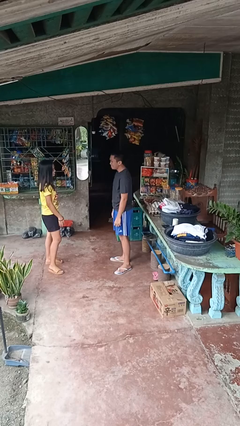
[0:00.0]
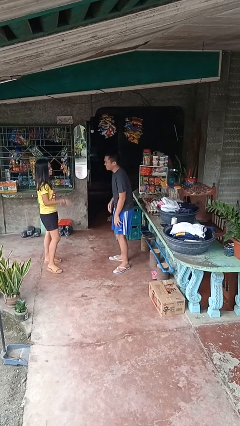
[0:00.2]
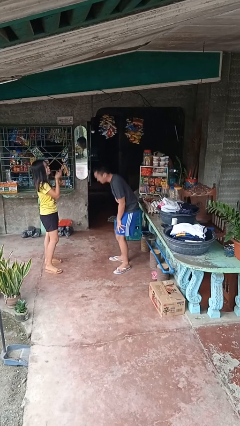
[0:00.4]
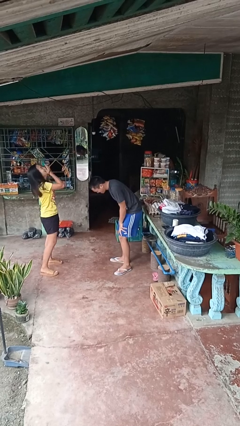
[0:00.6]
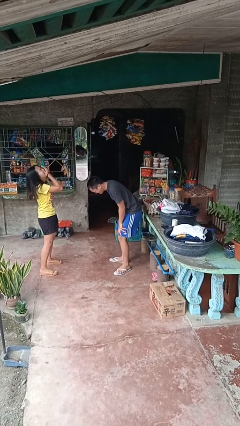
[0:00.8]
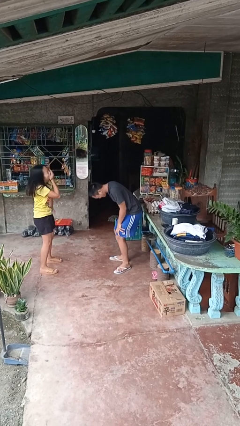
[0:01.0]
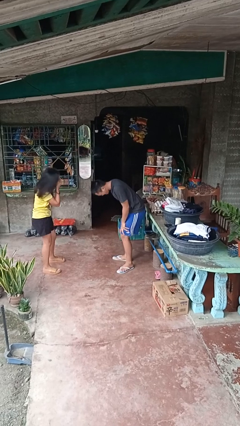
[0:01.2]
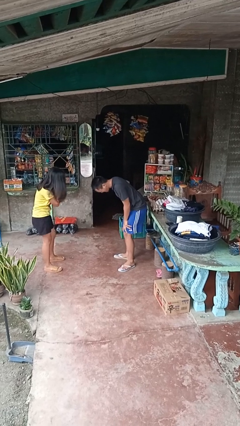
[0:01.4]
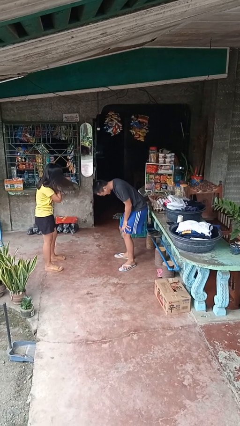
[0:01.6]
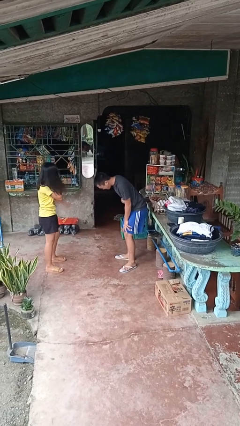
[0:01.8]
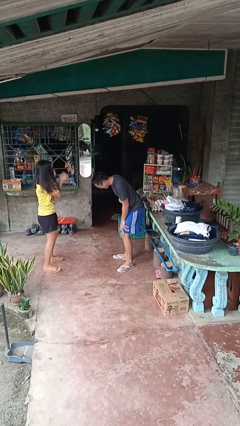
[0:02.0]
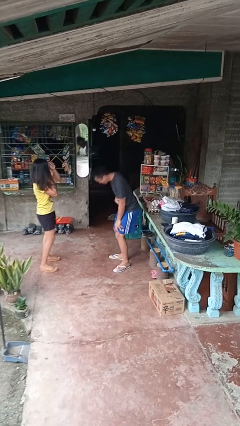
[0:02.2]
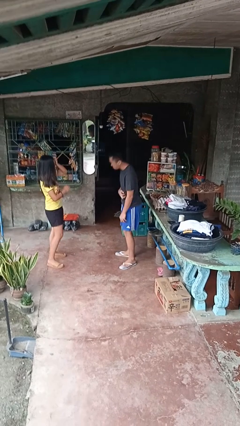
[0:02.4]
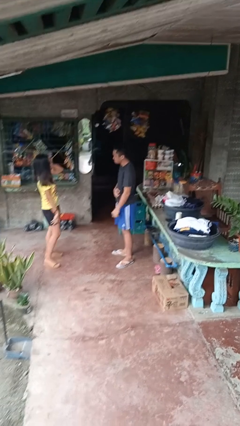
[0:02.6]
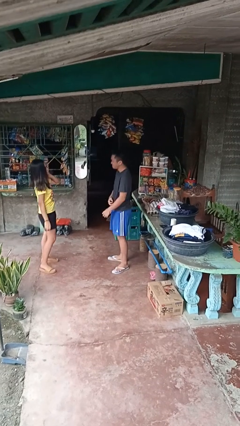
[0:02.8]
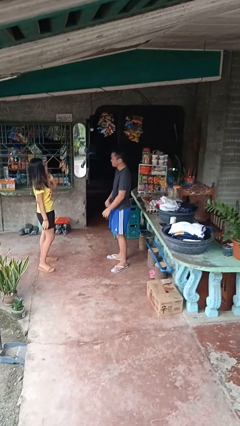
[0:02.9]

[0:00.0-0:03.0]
person laughs with person

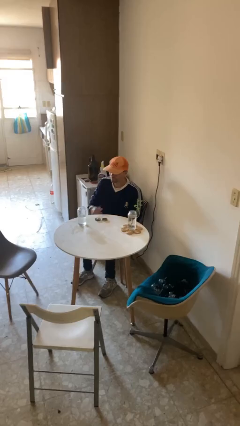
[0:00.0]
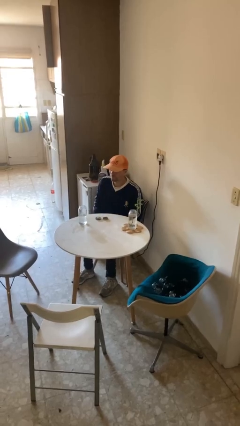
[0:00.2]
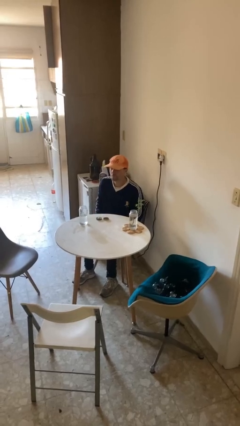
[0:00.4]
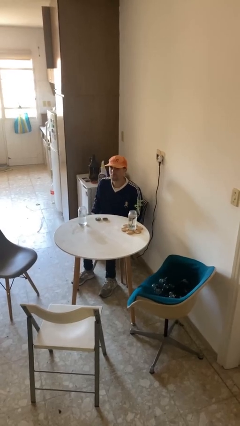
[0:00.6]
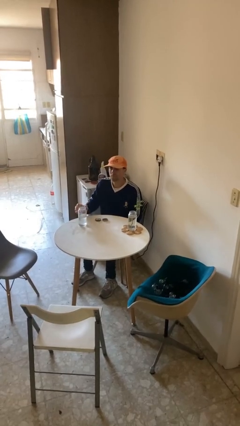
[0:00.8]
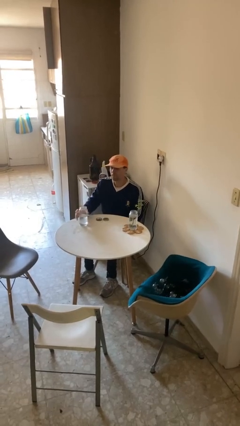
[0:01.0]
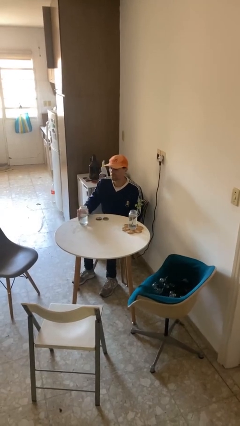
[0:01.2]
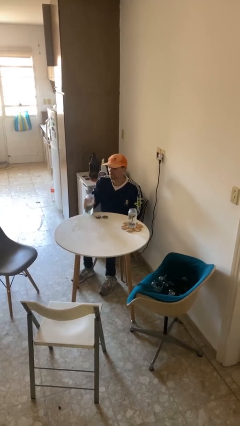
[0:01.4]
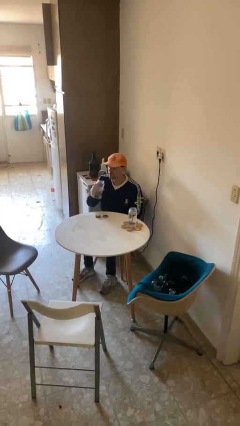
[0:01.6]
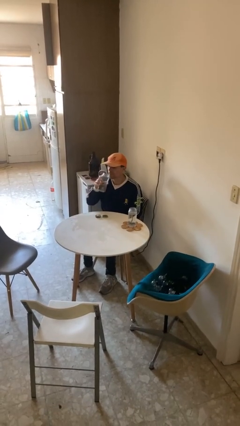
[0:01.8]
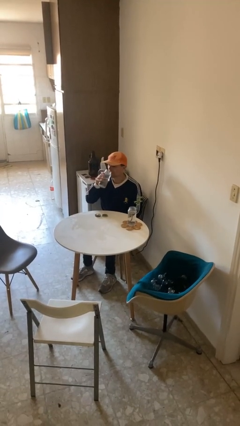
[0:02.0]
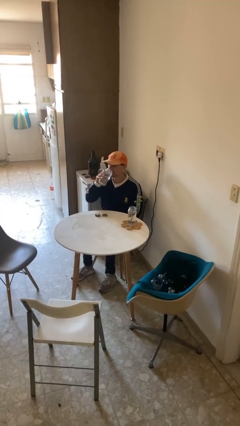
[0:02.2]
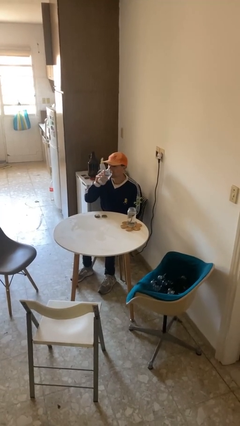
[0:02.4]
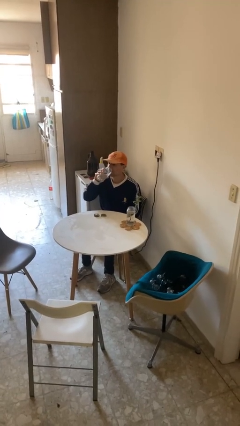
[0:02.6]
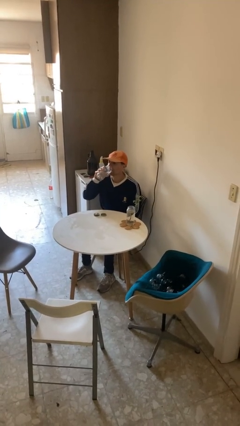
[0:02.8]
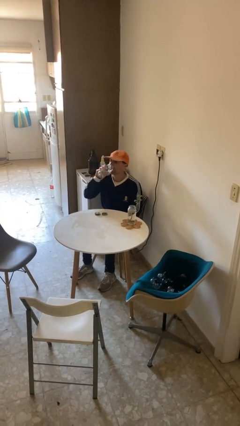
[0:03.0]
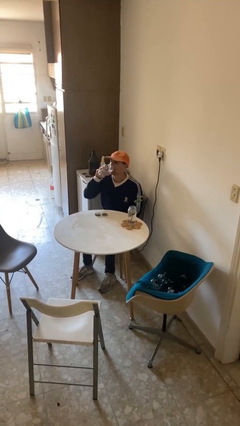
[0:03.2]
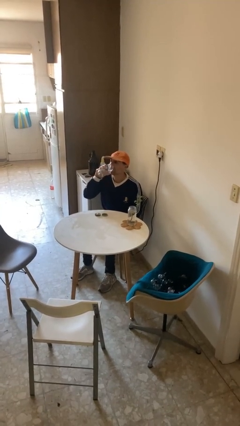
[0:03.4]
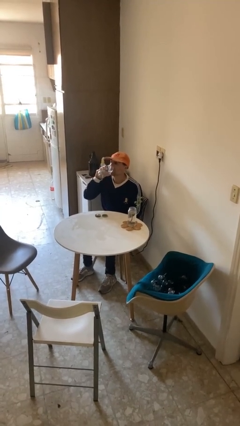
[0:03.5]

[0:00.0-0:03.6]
person drinks from cup

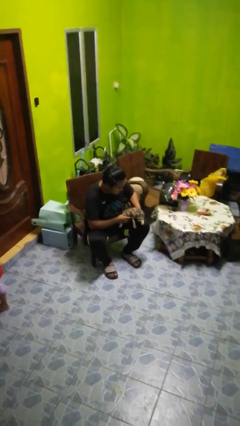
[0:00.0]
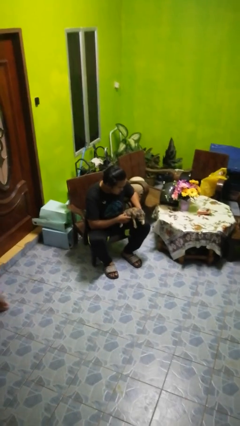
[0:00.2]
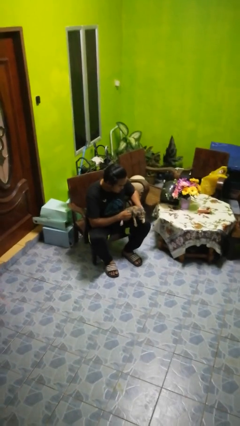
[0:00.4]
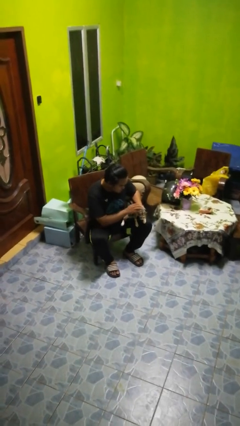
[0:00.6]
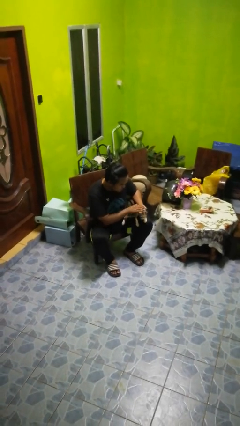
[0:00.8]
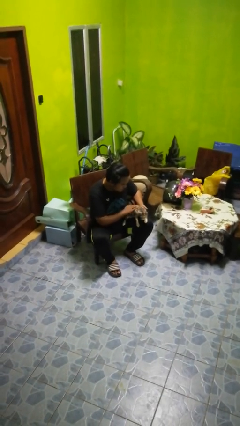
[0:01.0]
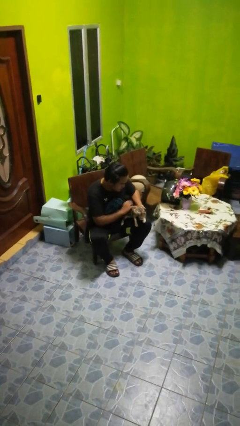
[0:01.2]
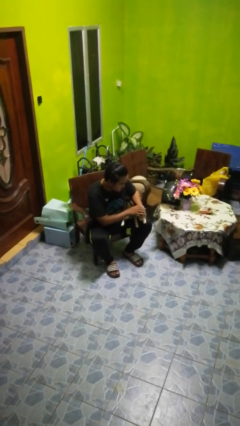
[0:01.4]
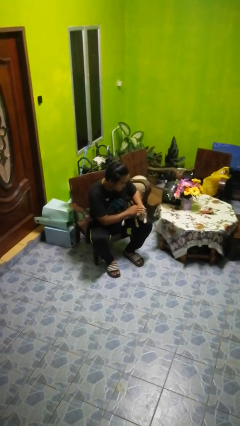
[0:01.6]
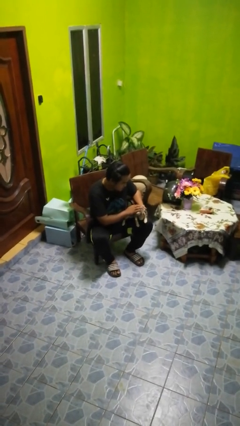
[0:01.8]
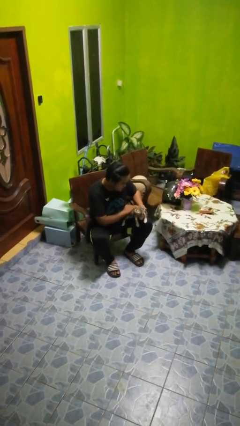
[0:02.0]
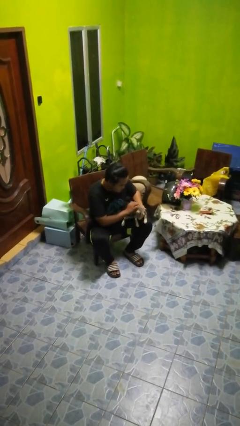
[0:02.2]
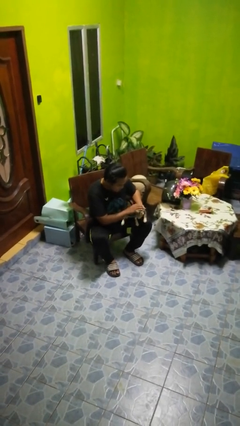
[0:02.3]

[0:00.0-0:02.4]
person pets cat

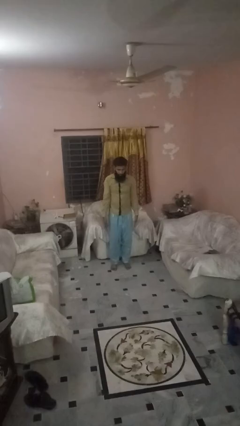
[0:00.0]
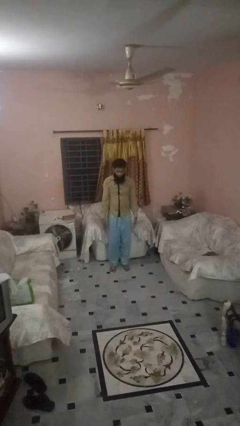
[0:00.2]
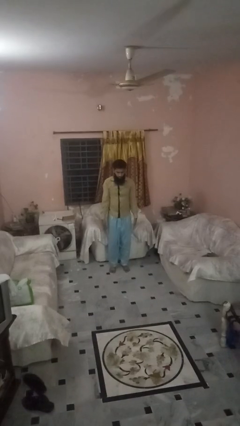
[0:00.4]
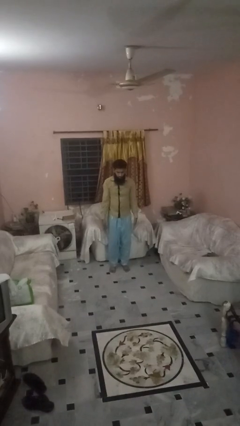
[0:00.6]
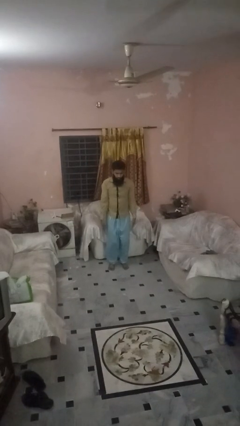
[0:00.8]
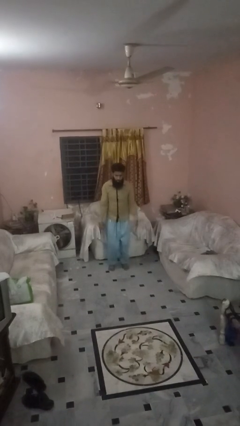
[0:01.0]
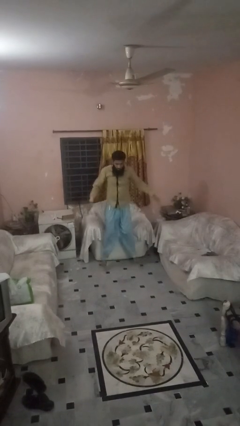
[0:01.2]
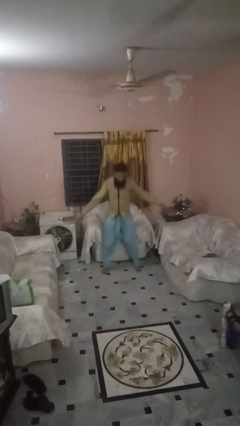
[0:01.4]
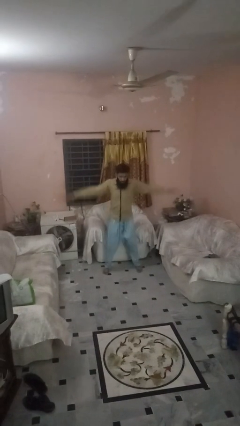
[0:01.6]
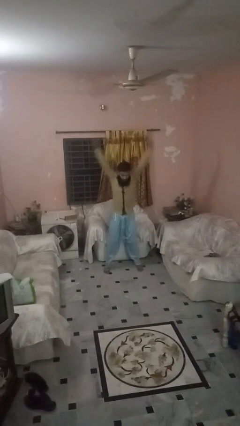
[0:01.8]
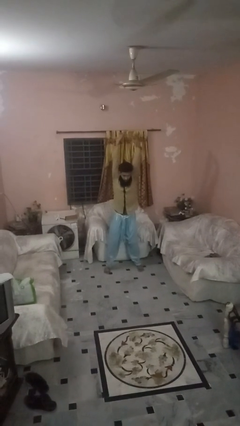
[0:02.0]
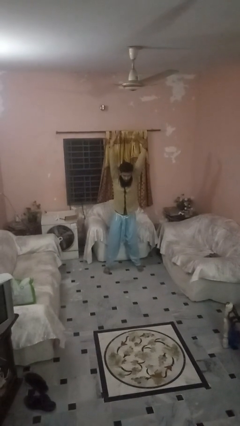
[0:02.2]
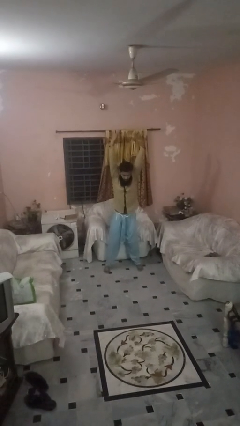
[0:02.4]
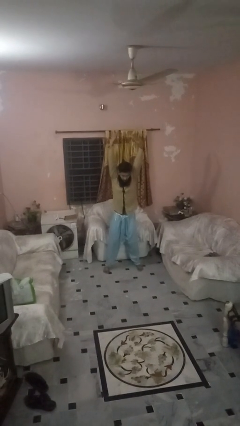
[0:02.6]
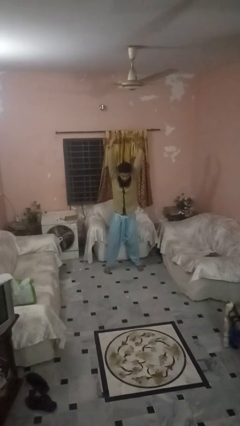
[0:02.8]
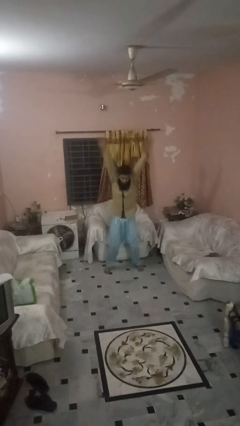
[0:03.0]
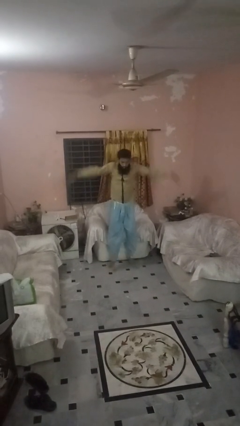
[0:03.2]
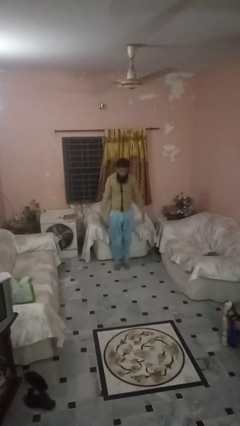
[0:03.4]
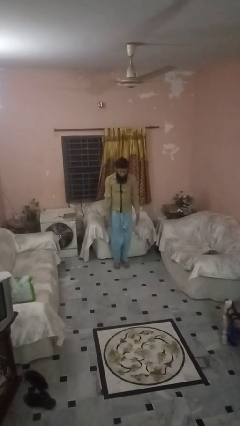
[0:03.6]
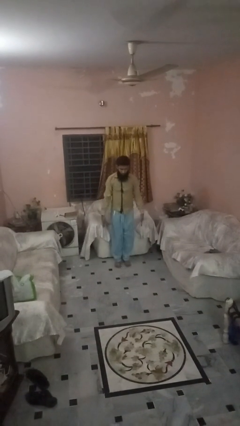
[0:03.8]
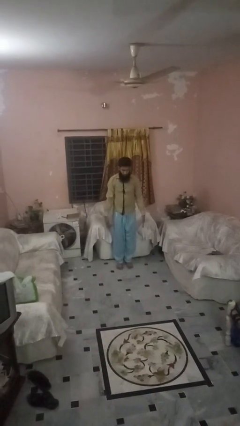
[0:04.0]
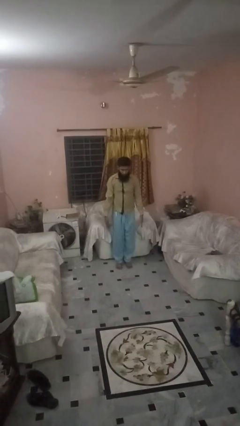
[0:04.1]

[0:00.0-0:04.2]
person exercises with jumping jacks

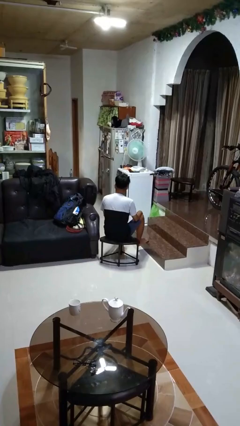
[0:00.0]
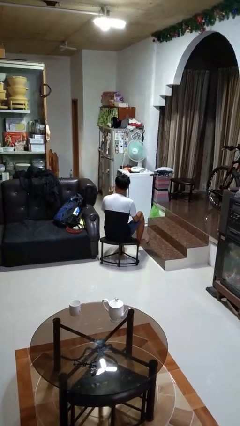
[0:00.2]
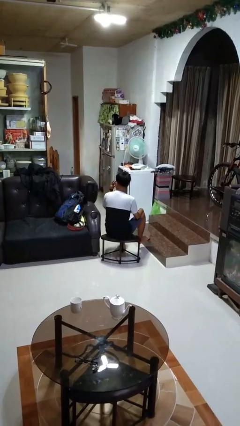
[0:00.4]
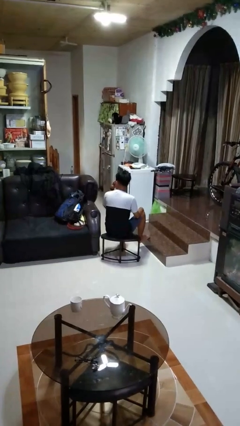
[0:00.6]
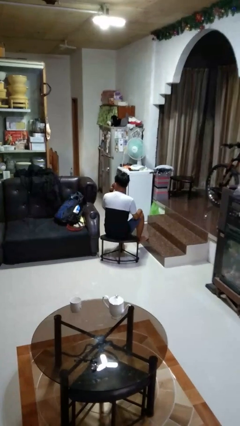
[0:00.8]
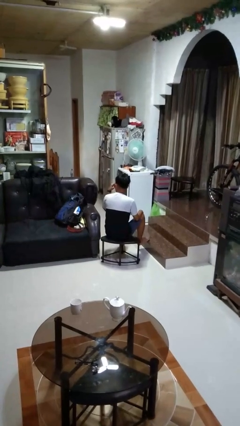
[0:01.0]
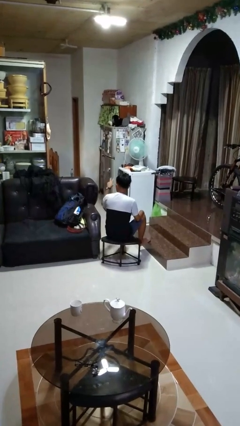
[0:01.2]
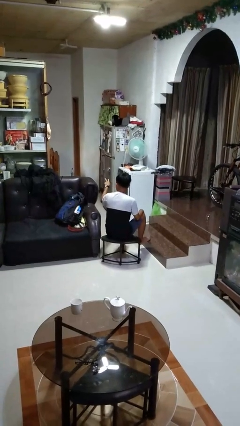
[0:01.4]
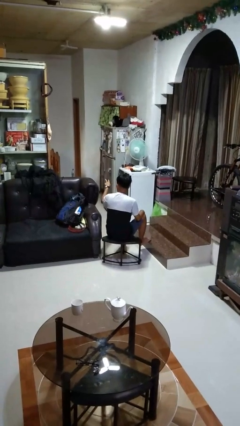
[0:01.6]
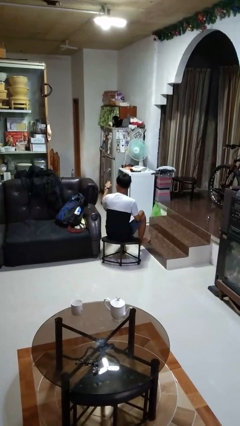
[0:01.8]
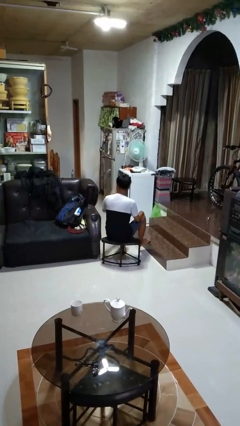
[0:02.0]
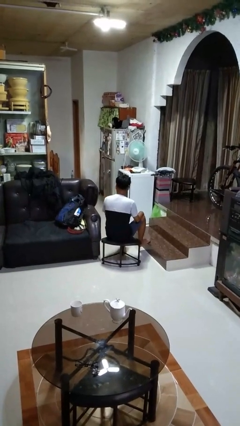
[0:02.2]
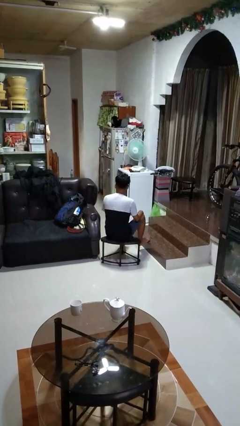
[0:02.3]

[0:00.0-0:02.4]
person gestures watch closely

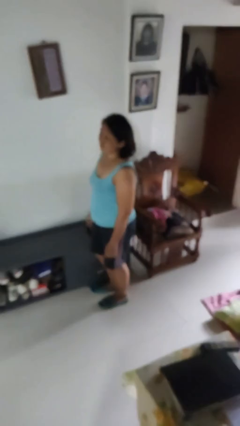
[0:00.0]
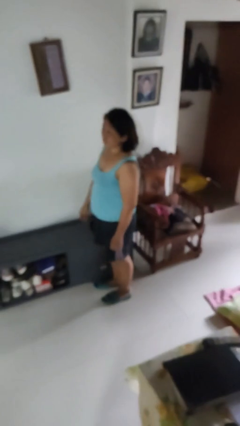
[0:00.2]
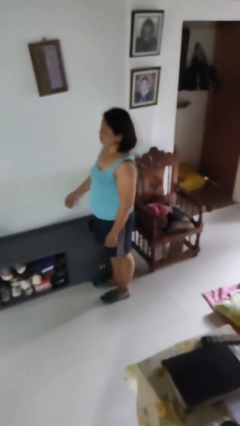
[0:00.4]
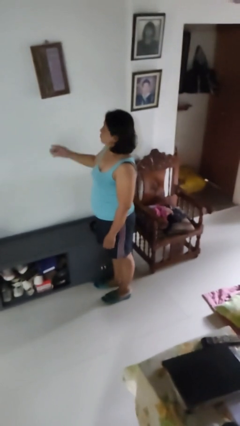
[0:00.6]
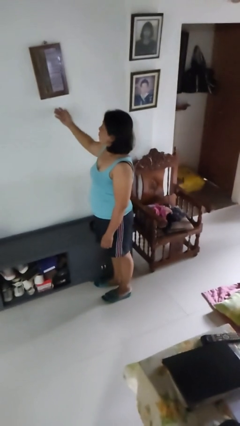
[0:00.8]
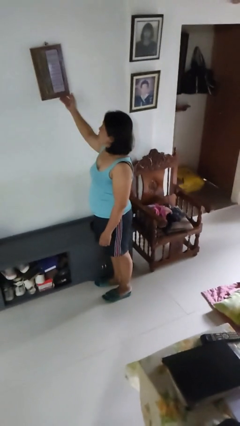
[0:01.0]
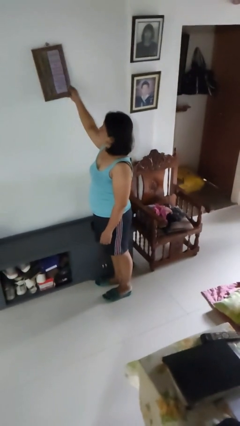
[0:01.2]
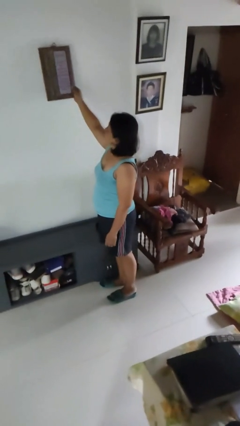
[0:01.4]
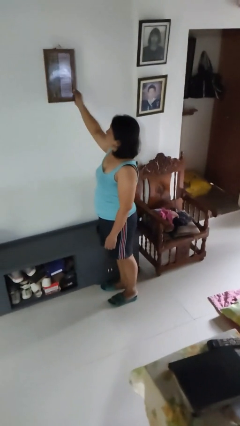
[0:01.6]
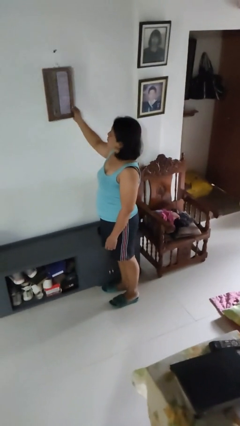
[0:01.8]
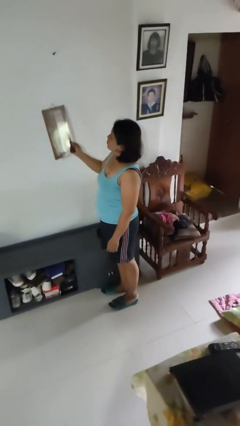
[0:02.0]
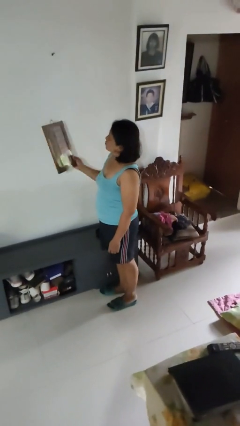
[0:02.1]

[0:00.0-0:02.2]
person takes down picture frame

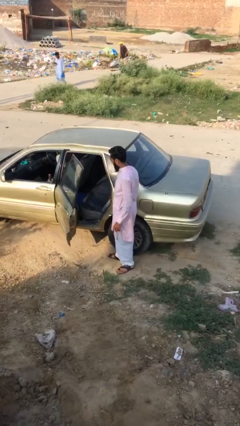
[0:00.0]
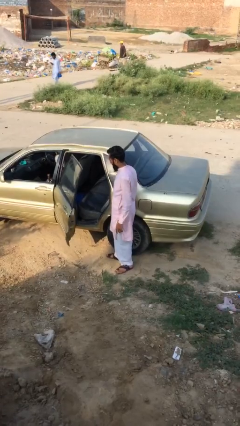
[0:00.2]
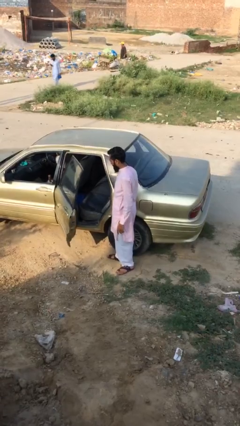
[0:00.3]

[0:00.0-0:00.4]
person closes car door
